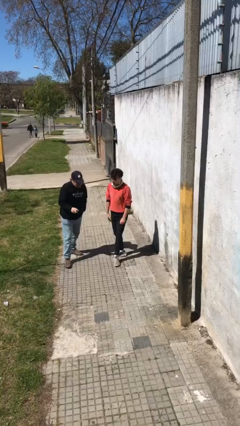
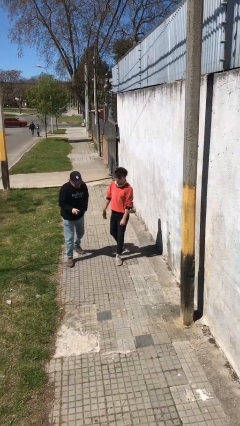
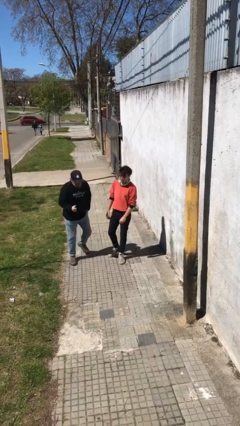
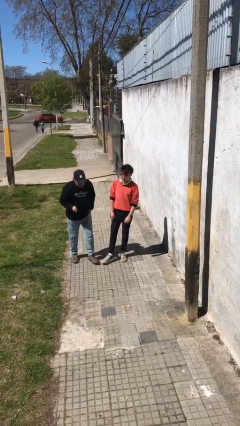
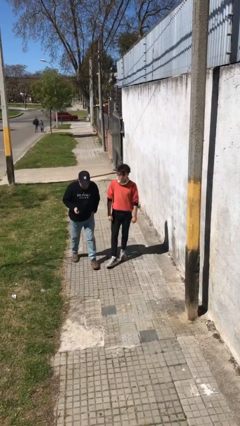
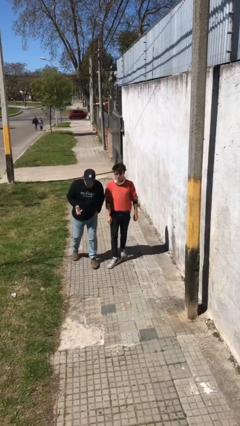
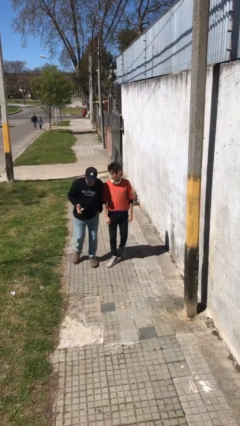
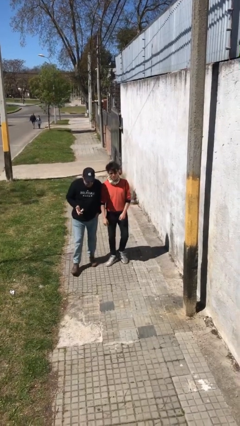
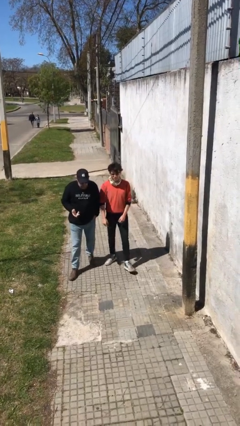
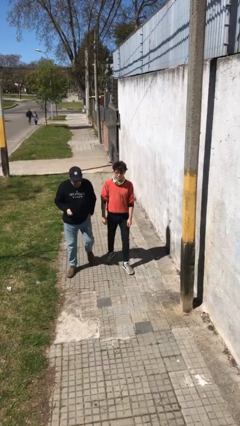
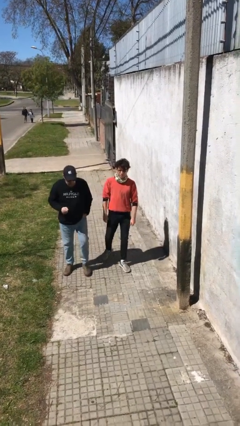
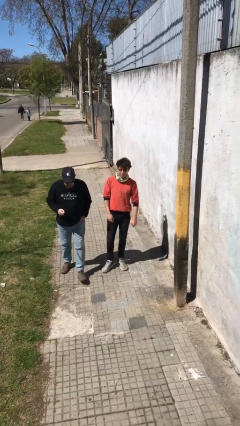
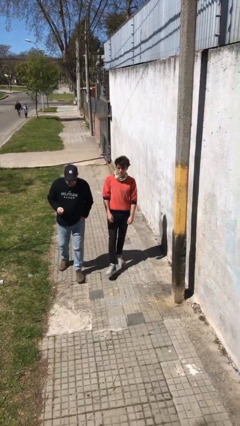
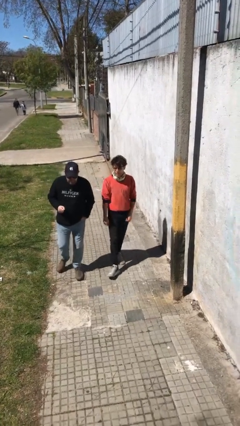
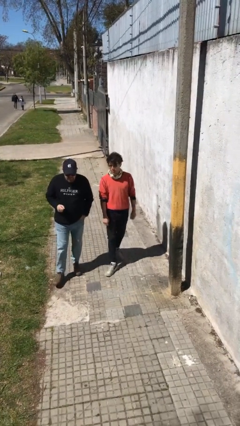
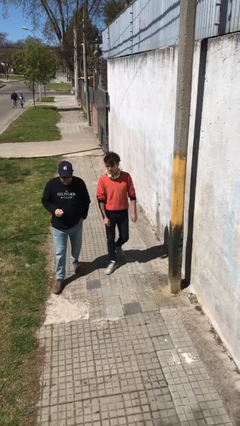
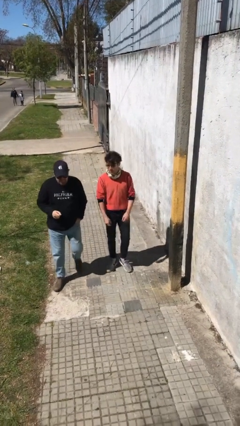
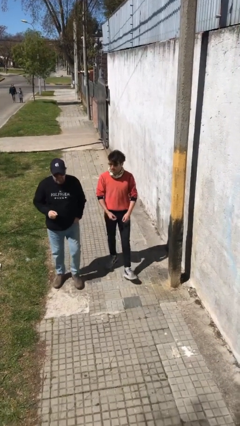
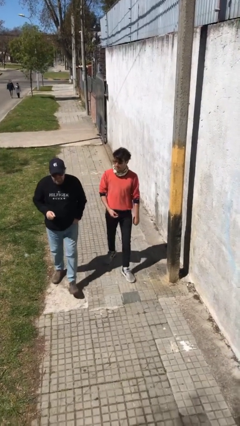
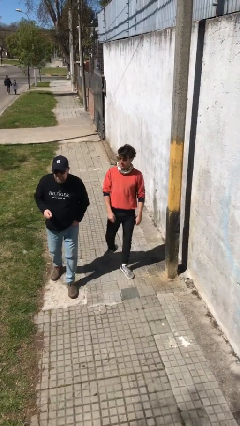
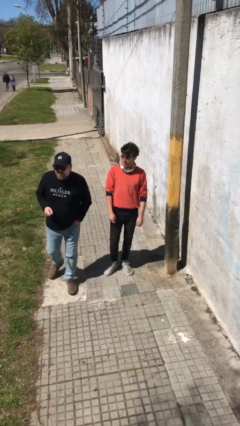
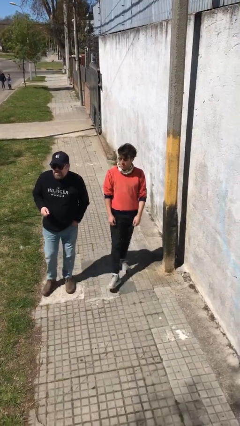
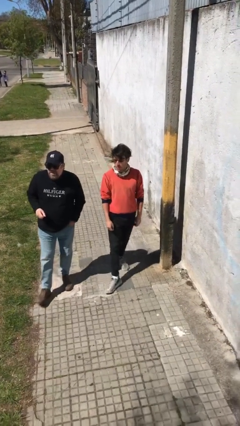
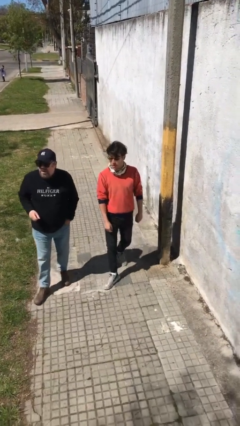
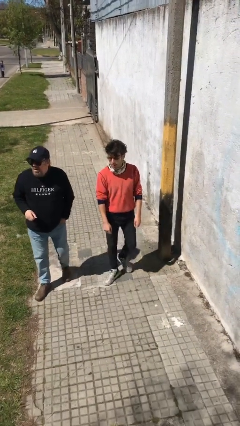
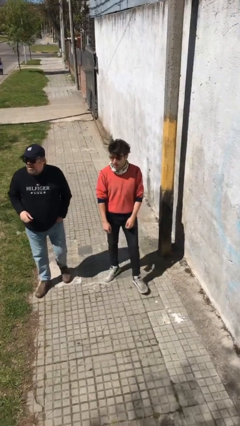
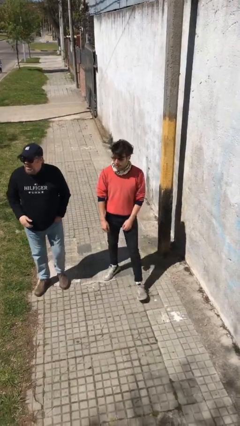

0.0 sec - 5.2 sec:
person talks to person

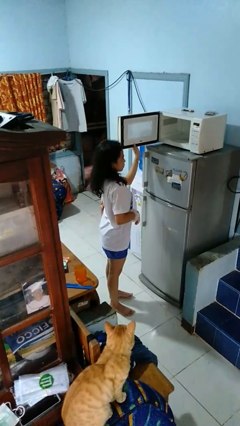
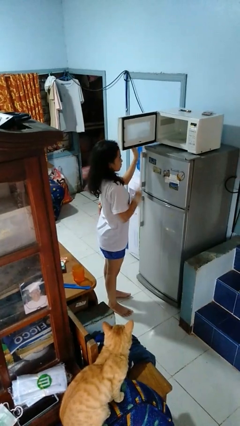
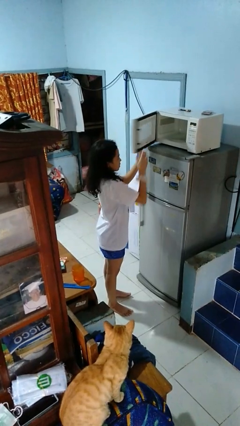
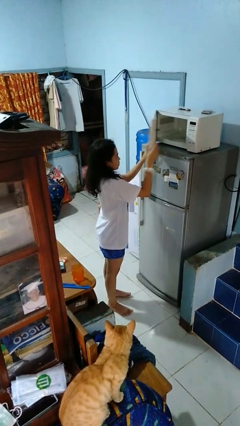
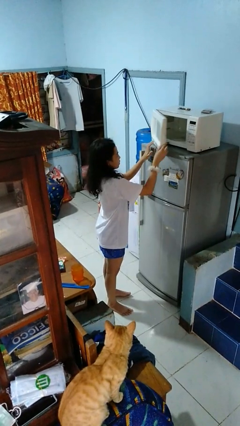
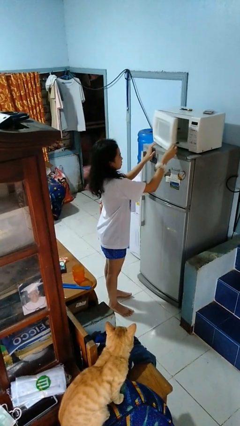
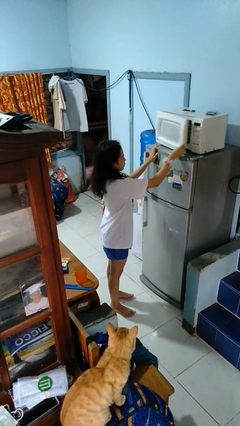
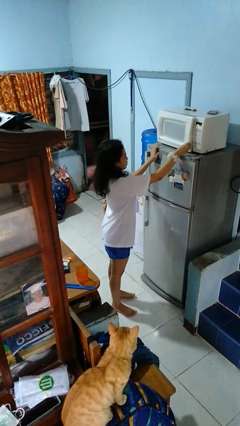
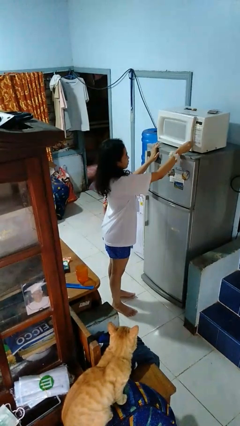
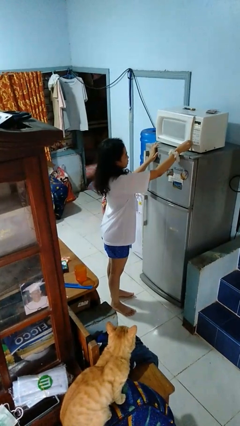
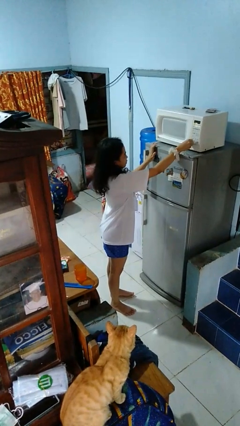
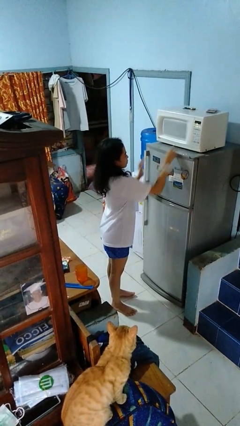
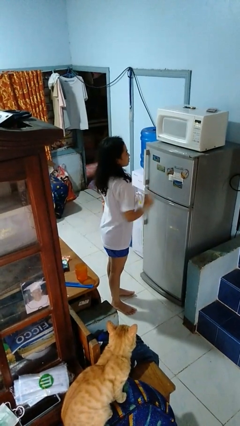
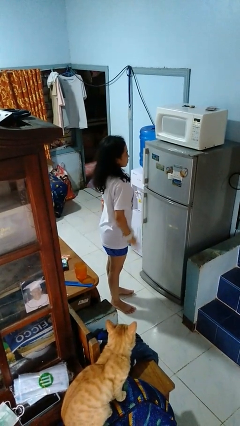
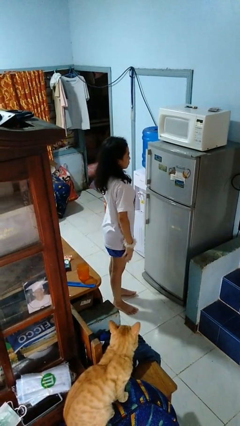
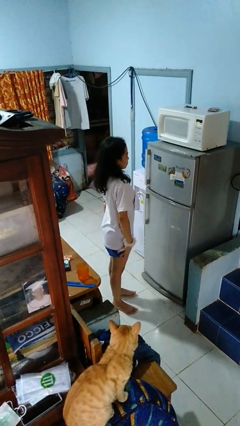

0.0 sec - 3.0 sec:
person closes microwave

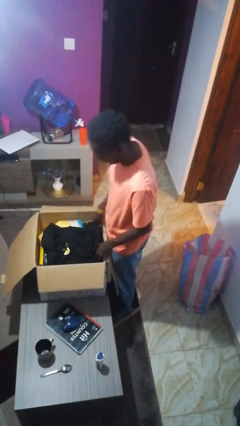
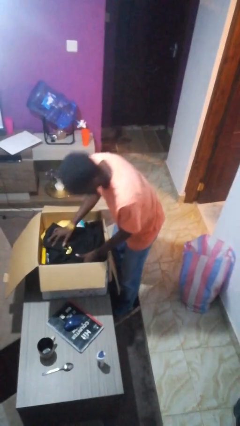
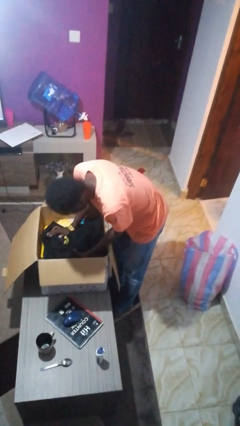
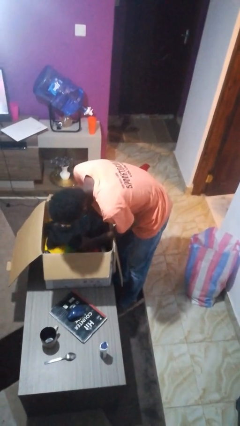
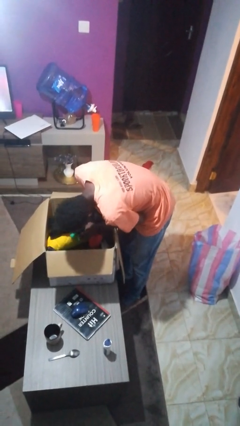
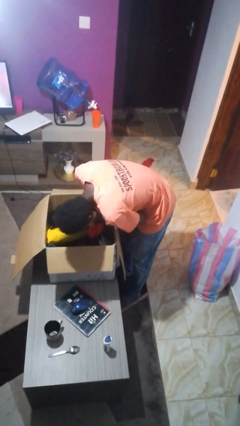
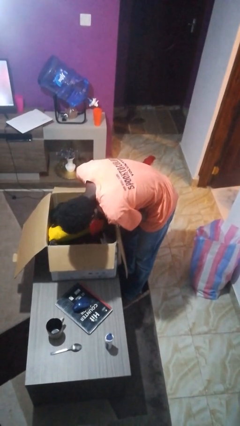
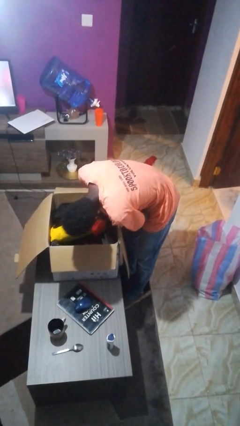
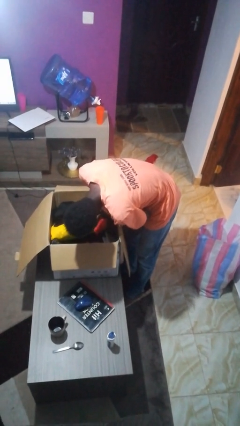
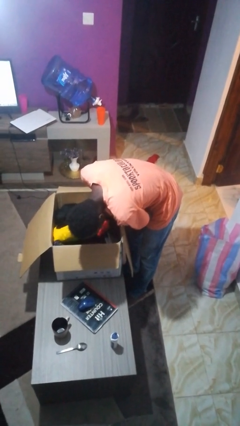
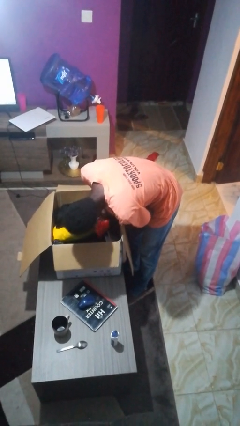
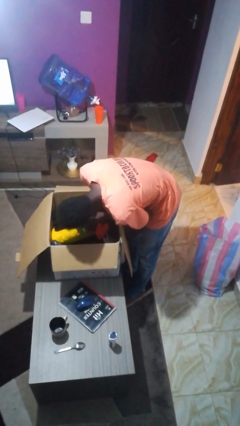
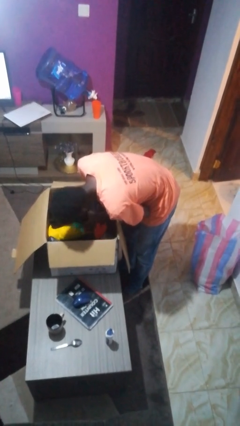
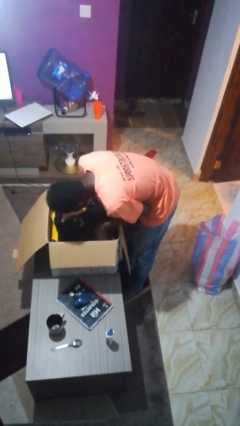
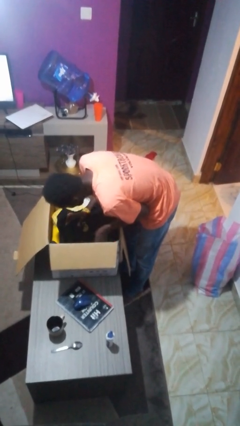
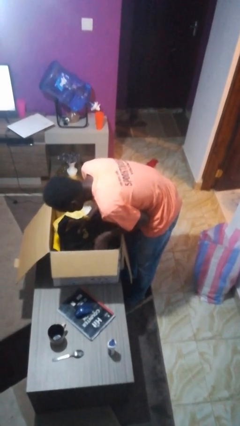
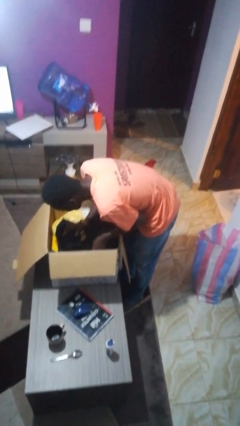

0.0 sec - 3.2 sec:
person searches in box

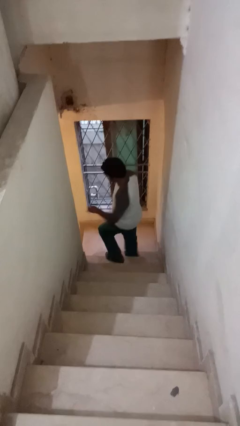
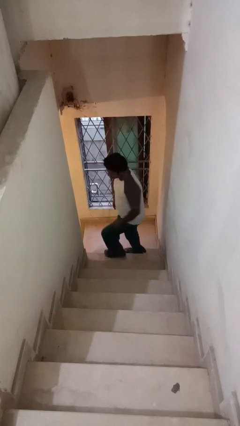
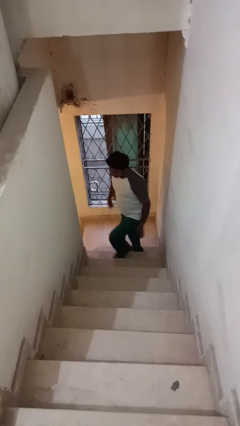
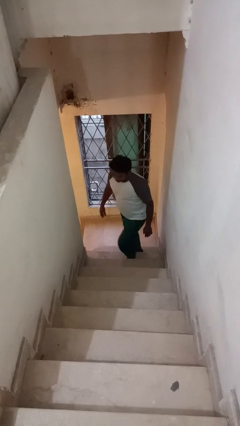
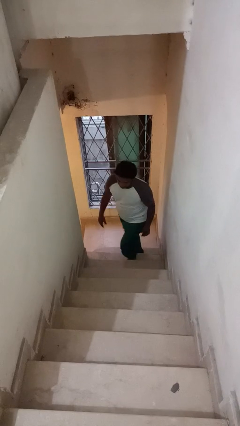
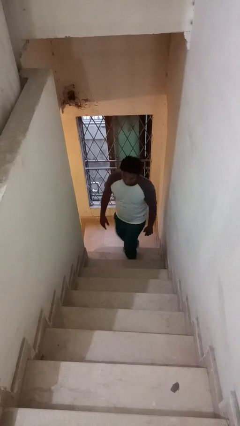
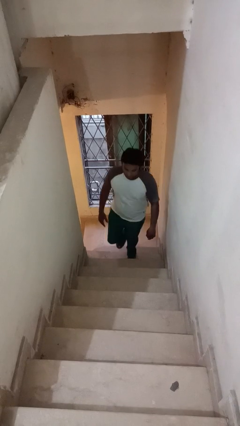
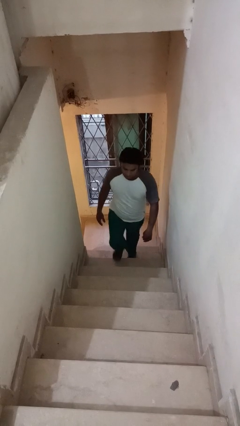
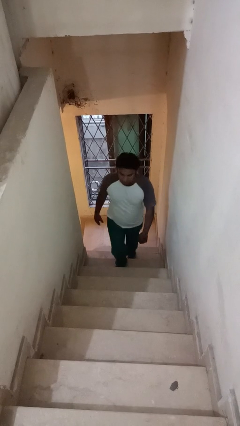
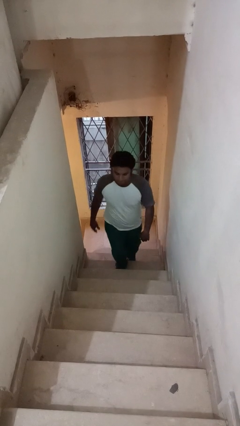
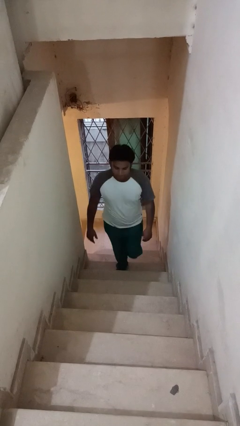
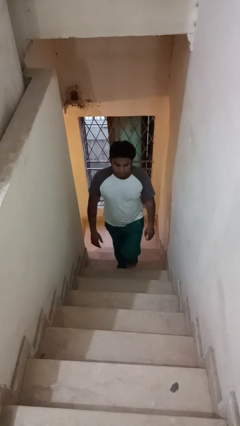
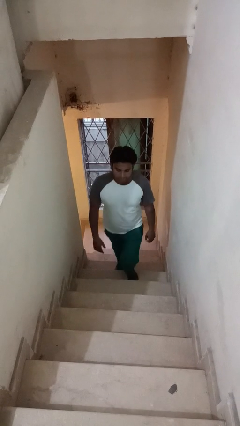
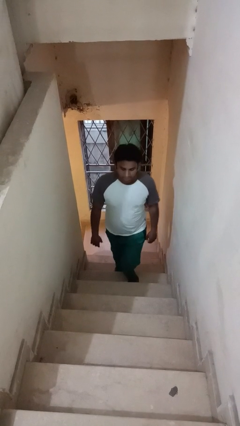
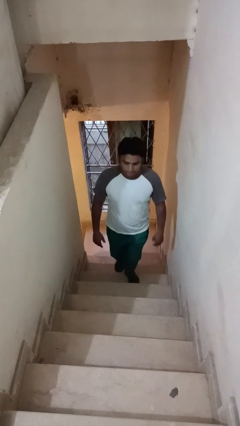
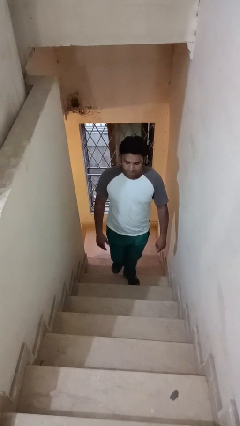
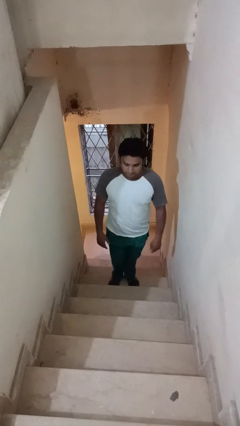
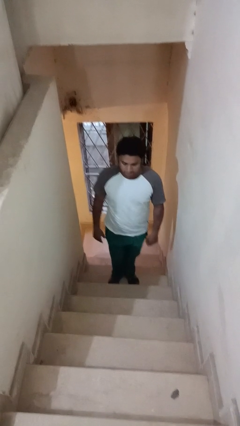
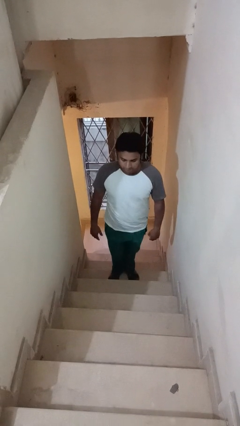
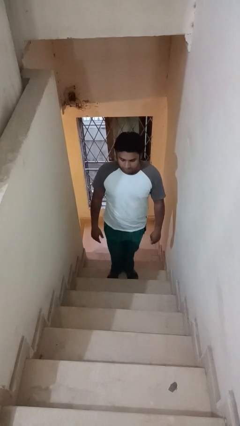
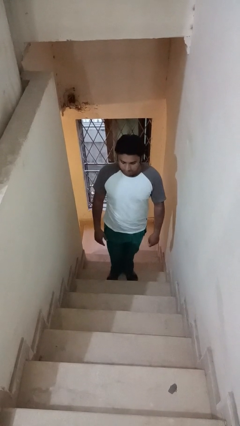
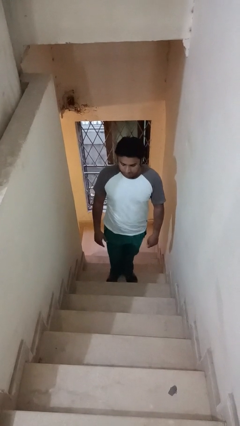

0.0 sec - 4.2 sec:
person climbs up stairs

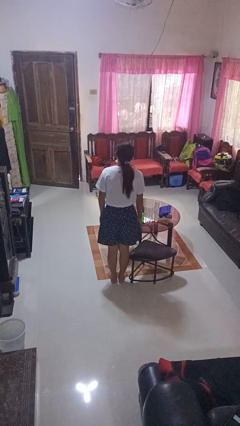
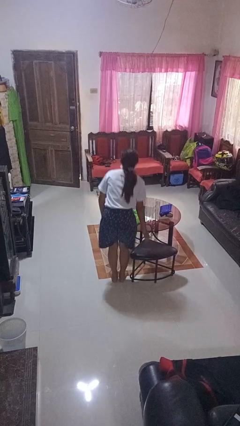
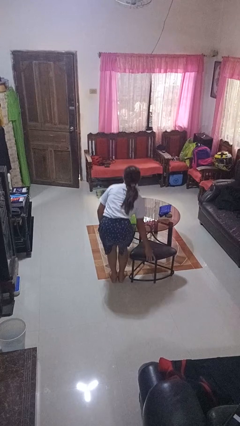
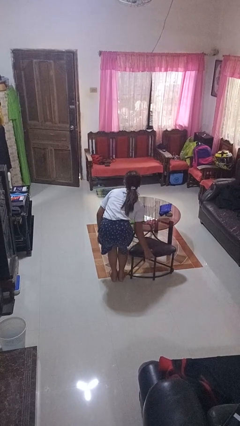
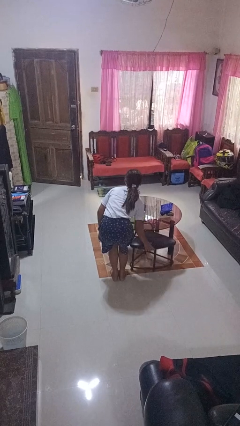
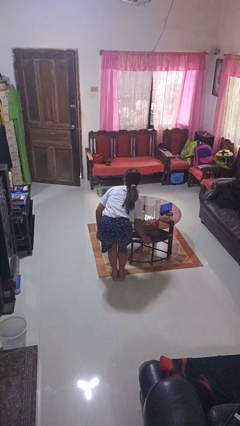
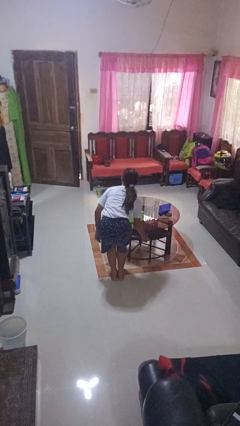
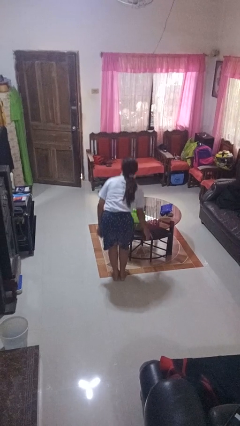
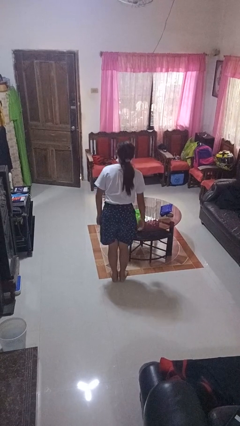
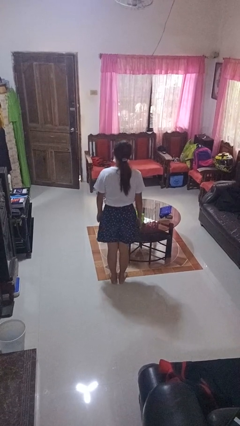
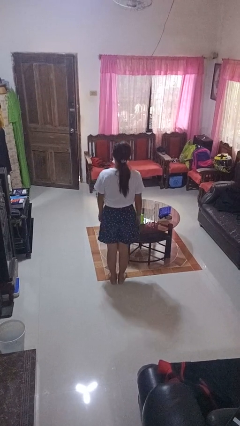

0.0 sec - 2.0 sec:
person pushes in chair
